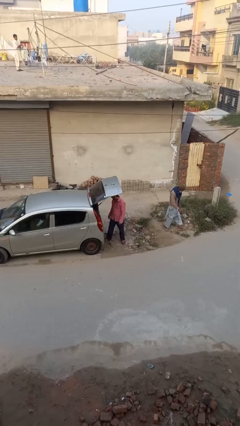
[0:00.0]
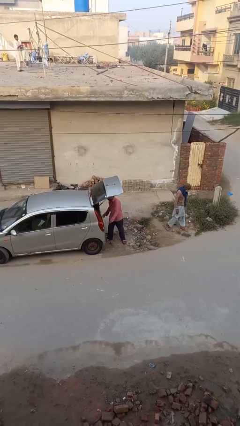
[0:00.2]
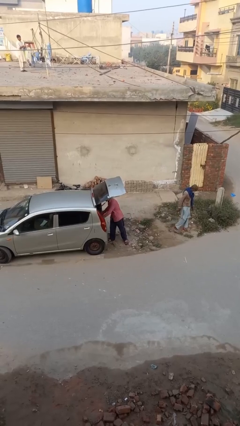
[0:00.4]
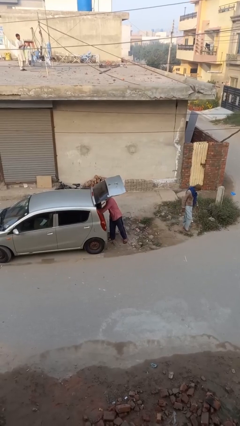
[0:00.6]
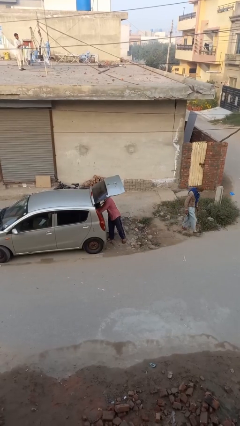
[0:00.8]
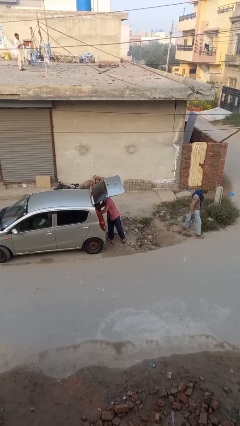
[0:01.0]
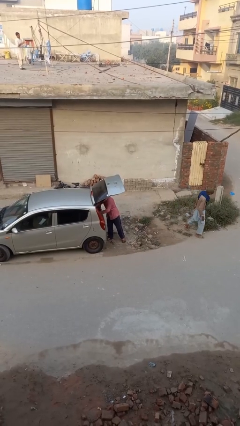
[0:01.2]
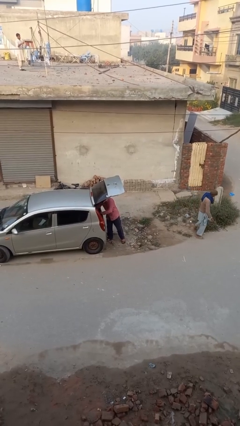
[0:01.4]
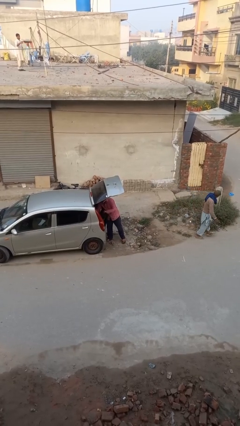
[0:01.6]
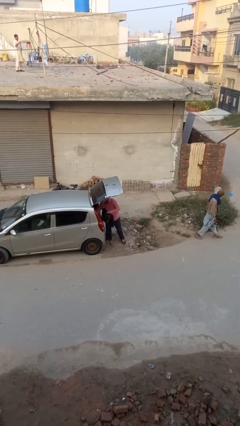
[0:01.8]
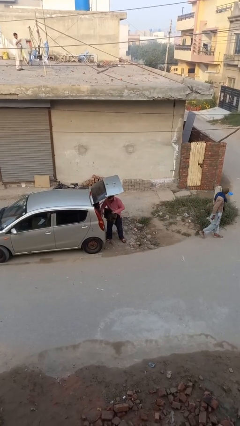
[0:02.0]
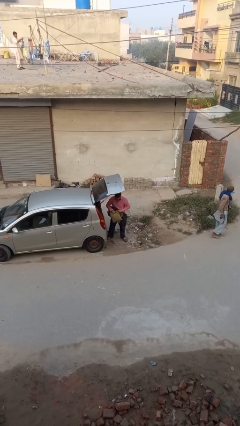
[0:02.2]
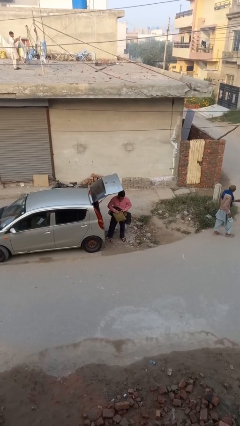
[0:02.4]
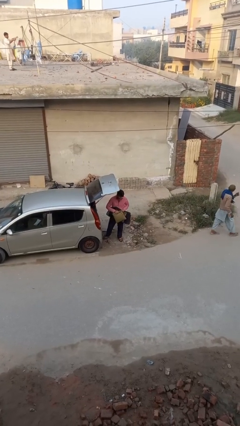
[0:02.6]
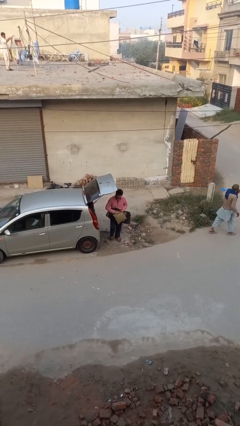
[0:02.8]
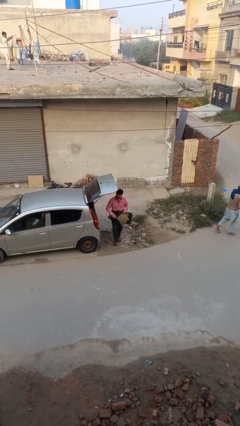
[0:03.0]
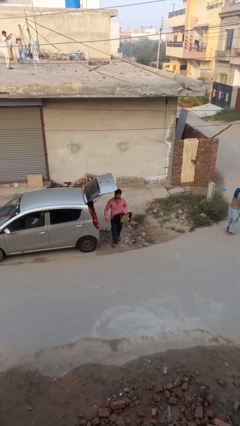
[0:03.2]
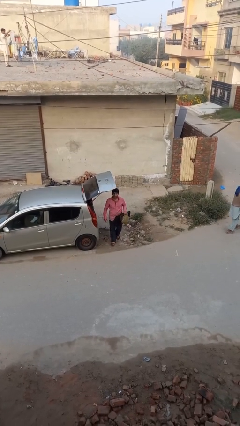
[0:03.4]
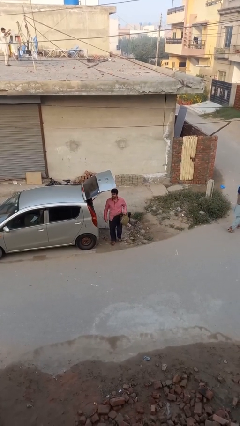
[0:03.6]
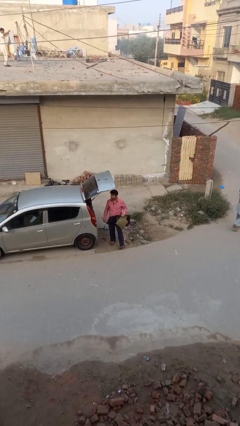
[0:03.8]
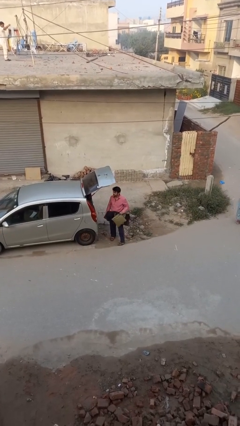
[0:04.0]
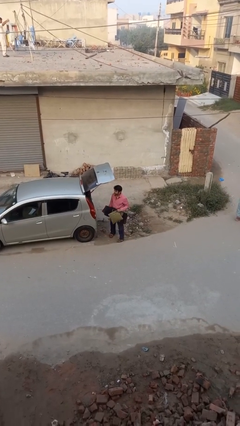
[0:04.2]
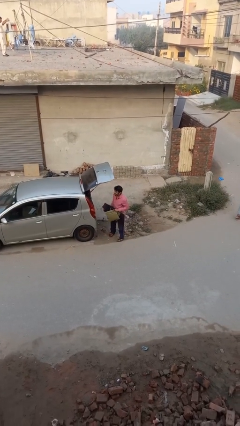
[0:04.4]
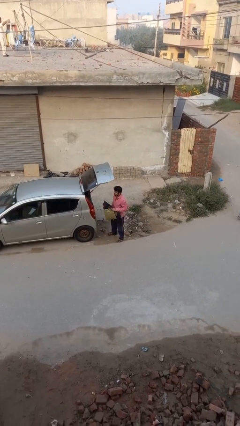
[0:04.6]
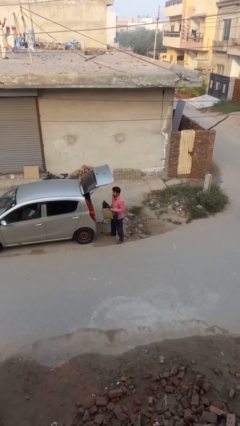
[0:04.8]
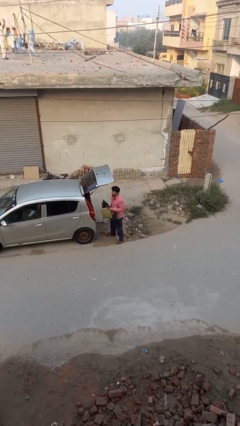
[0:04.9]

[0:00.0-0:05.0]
person unloads car

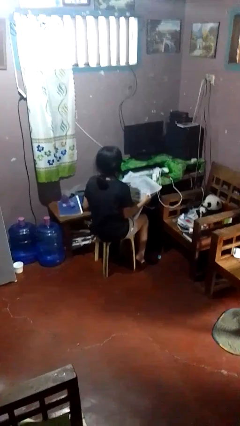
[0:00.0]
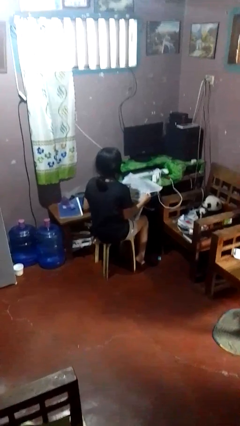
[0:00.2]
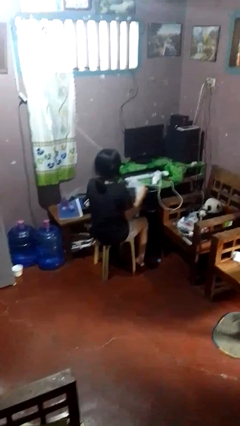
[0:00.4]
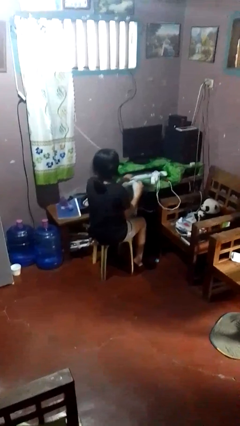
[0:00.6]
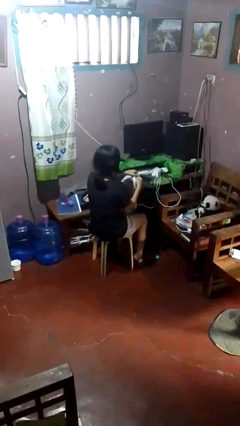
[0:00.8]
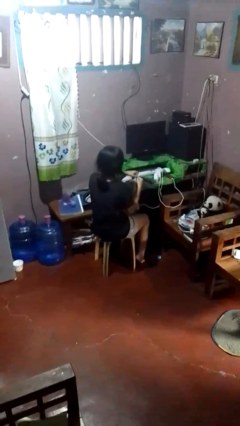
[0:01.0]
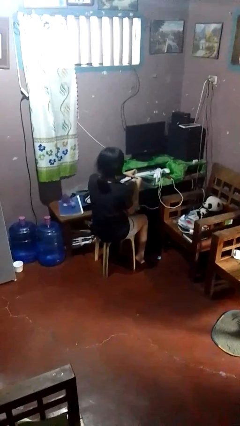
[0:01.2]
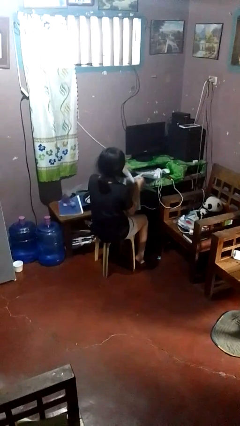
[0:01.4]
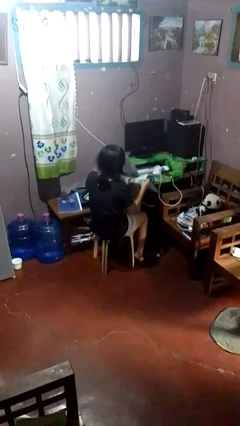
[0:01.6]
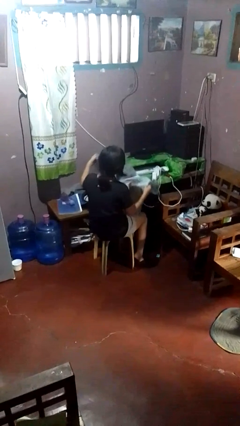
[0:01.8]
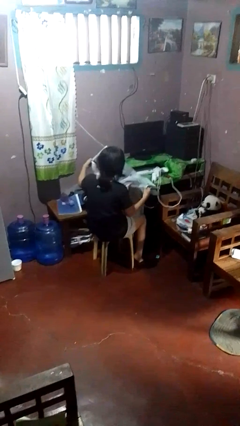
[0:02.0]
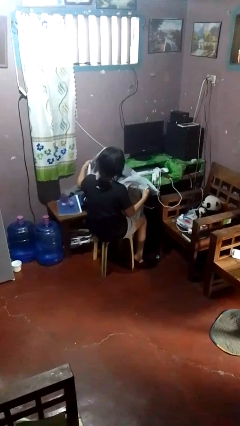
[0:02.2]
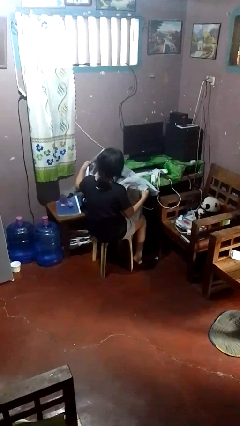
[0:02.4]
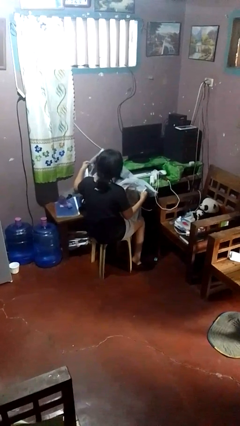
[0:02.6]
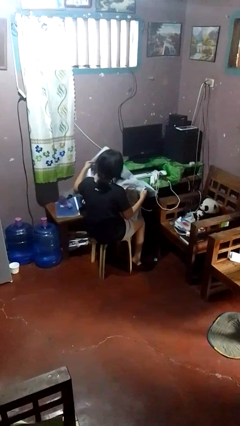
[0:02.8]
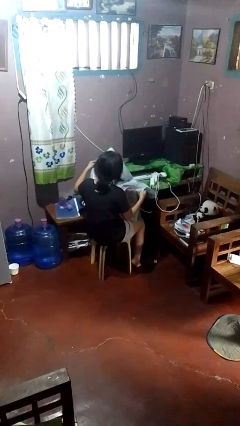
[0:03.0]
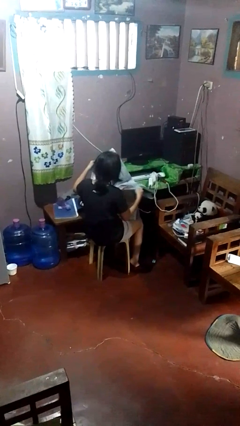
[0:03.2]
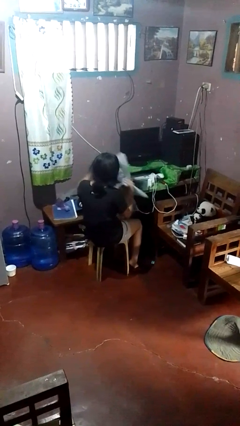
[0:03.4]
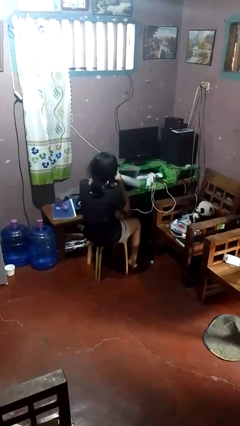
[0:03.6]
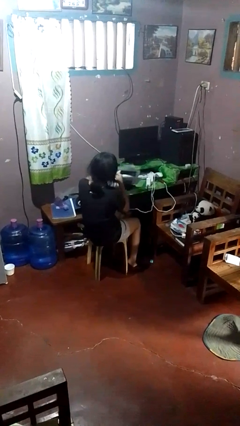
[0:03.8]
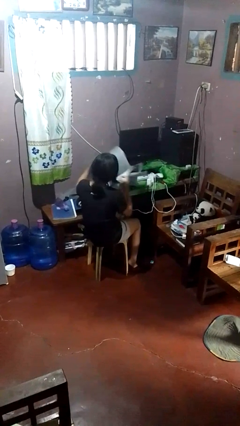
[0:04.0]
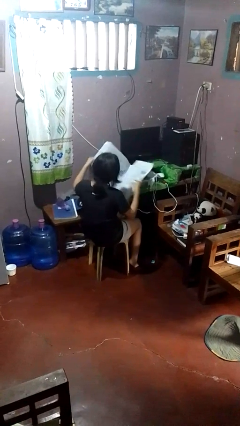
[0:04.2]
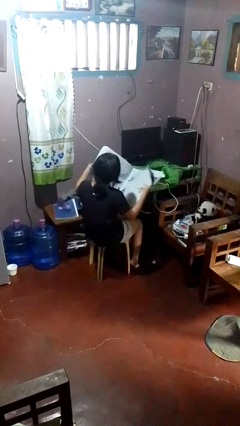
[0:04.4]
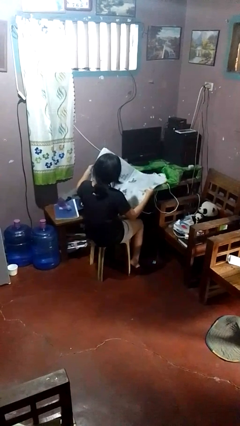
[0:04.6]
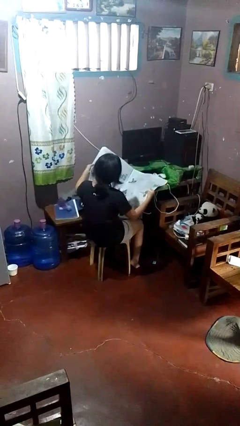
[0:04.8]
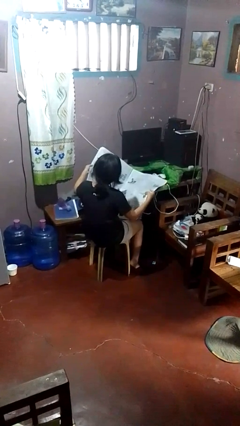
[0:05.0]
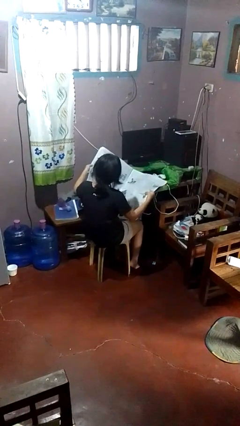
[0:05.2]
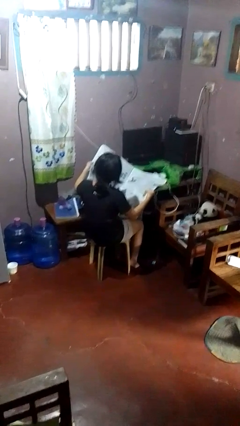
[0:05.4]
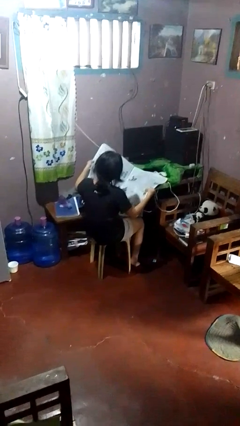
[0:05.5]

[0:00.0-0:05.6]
person reads newspaper

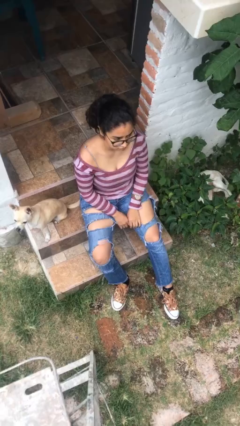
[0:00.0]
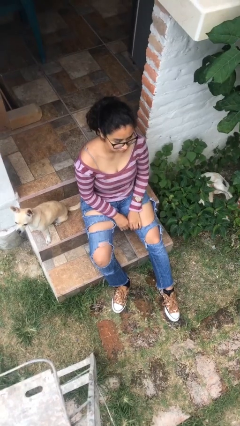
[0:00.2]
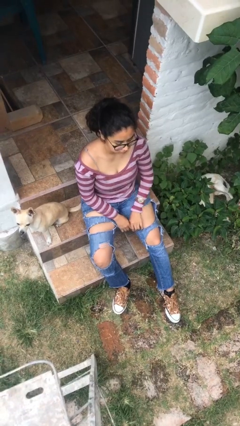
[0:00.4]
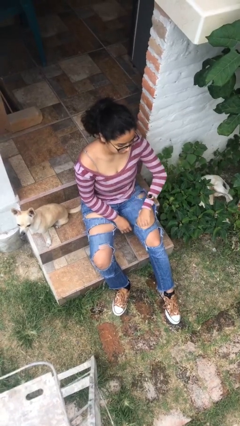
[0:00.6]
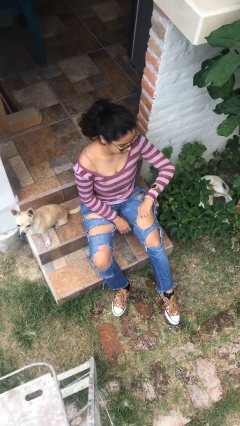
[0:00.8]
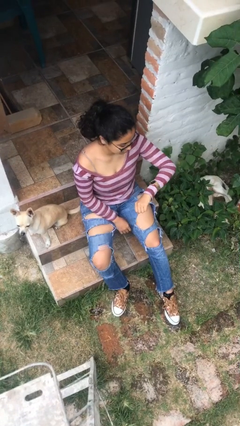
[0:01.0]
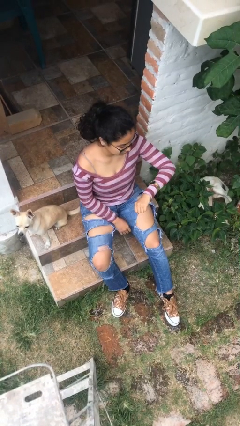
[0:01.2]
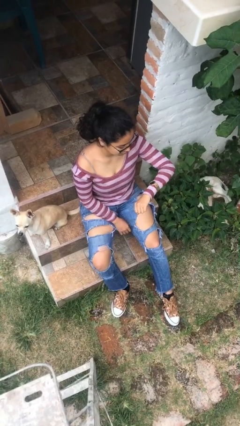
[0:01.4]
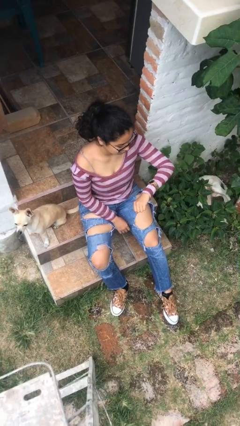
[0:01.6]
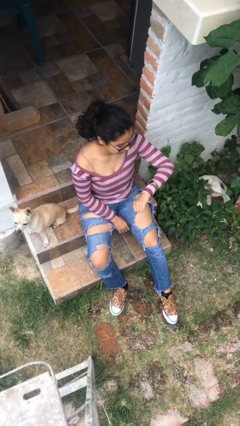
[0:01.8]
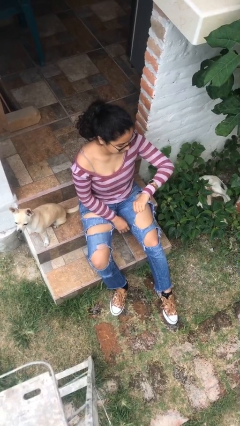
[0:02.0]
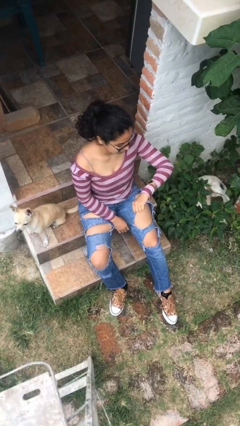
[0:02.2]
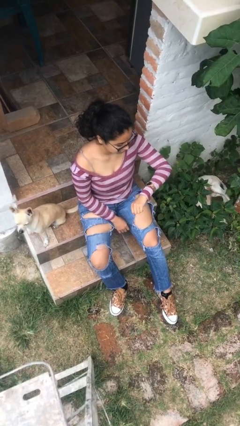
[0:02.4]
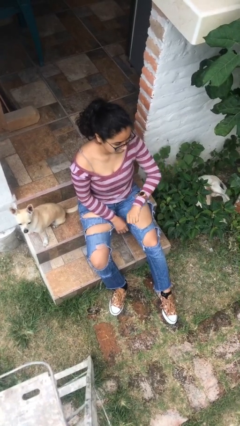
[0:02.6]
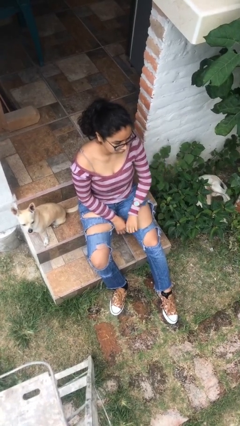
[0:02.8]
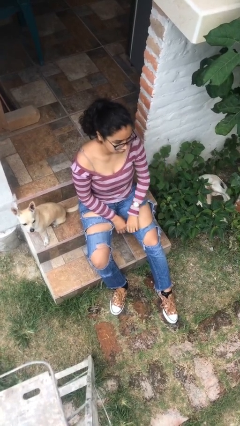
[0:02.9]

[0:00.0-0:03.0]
person looks at wristwatch

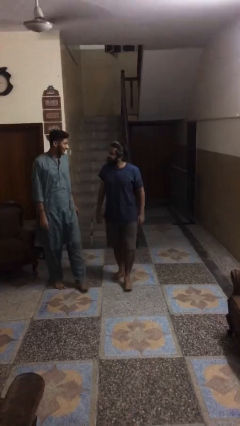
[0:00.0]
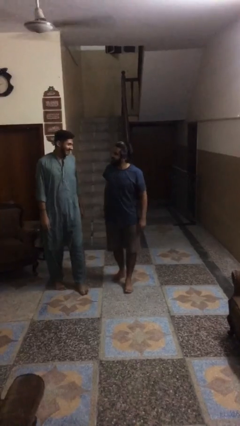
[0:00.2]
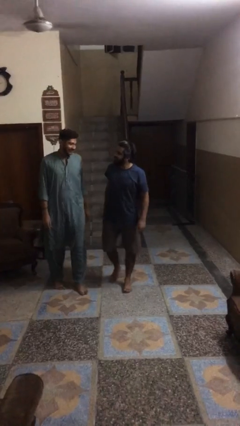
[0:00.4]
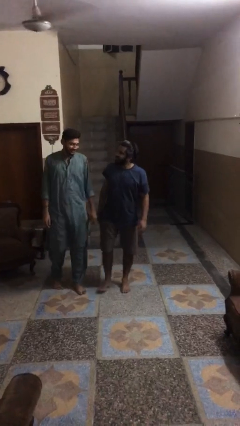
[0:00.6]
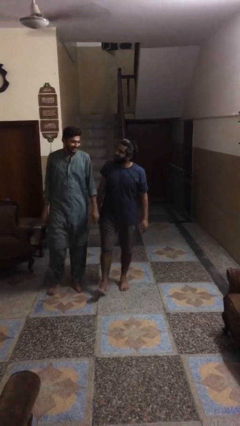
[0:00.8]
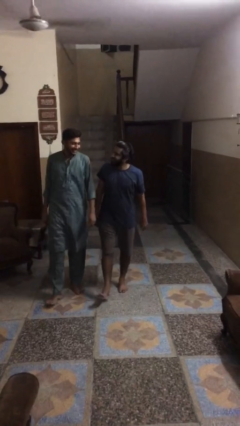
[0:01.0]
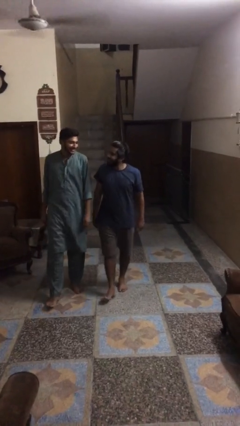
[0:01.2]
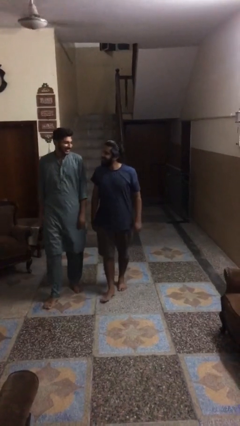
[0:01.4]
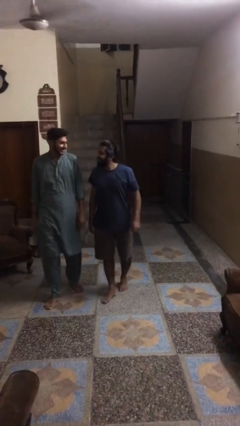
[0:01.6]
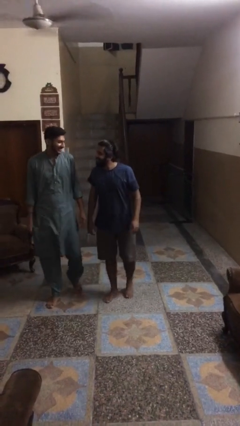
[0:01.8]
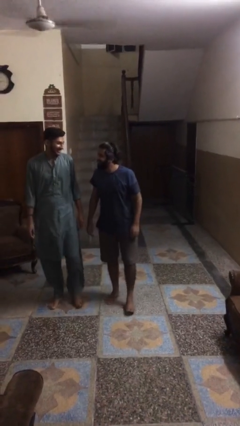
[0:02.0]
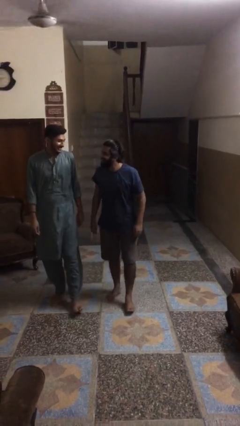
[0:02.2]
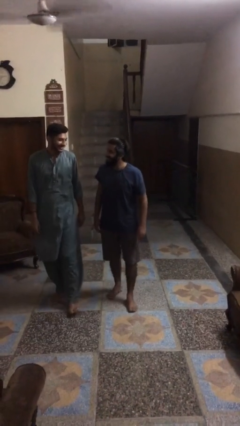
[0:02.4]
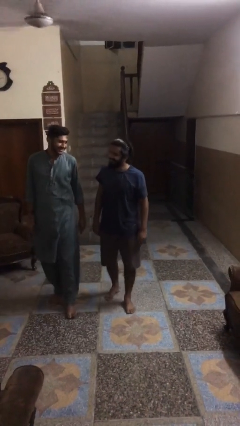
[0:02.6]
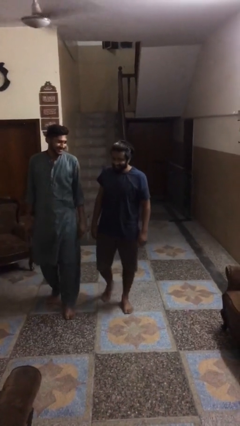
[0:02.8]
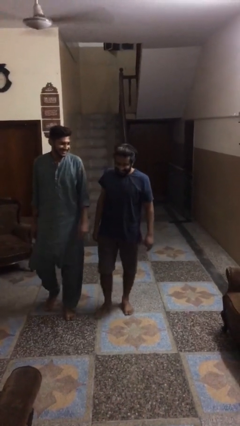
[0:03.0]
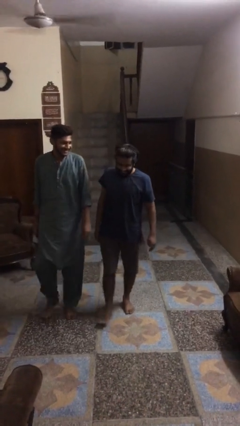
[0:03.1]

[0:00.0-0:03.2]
person talks to person

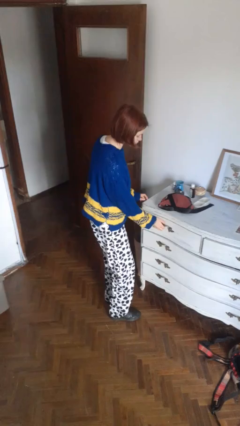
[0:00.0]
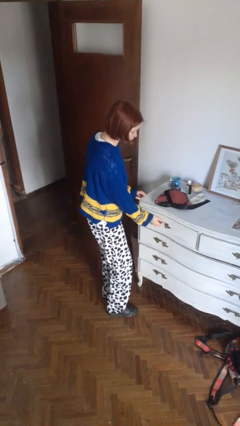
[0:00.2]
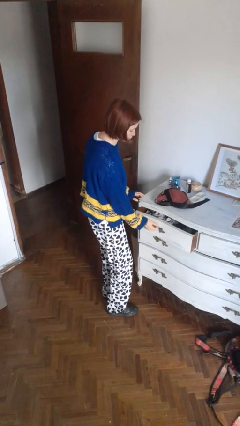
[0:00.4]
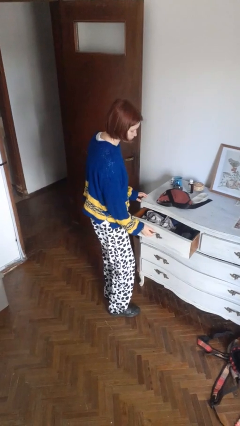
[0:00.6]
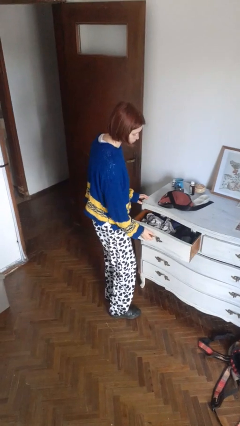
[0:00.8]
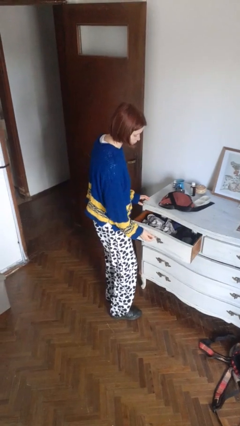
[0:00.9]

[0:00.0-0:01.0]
person opens dresser drawer
